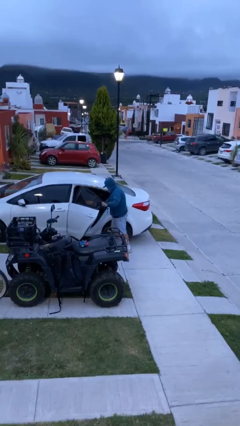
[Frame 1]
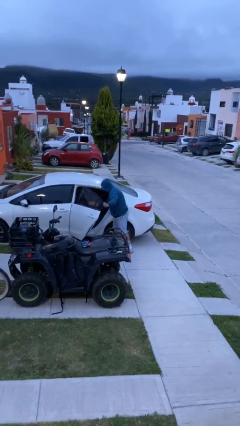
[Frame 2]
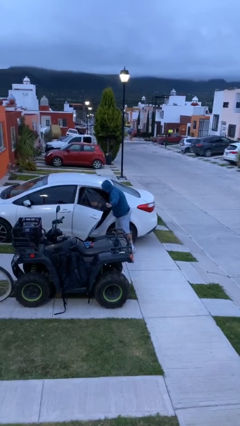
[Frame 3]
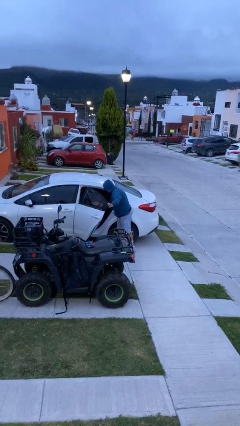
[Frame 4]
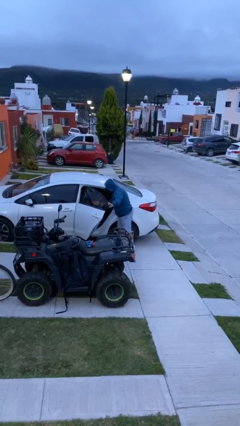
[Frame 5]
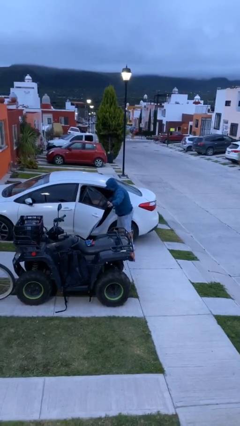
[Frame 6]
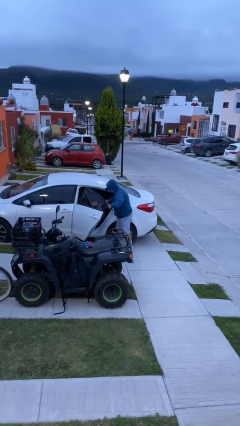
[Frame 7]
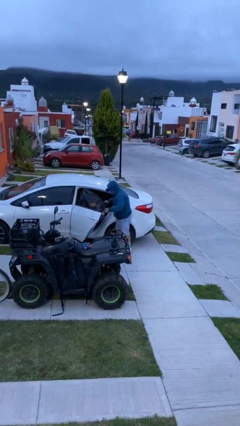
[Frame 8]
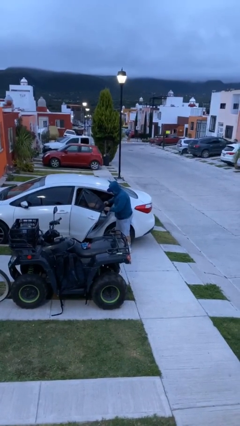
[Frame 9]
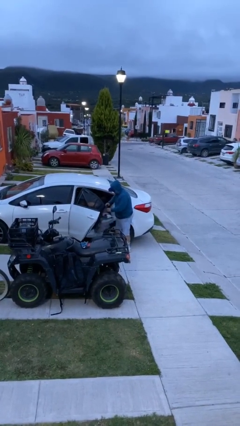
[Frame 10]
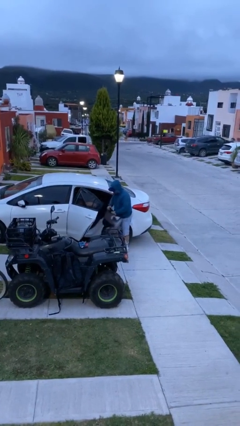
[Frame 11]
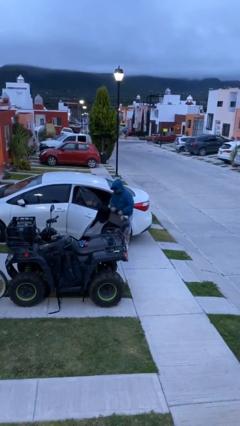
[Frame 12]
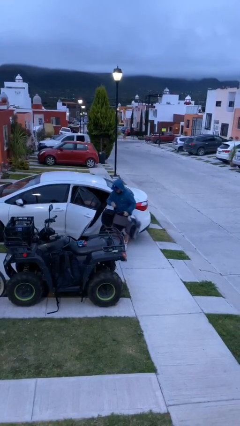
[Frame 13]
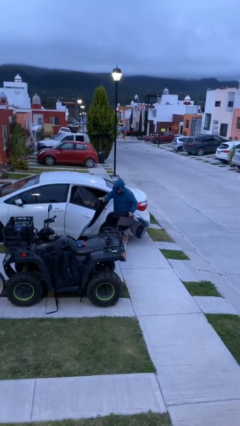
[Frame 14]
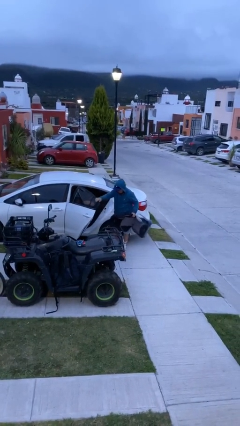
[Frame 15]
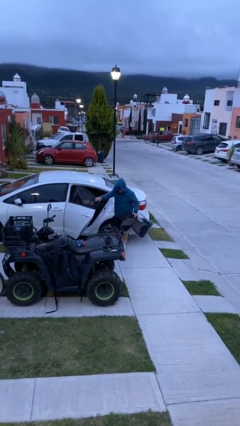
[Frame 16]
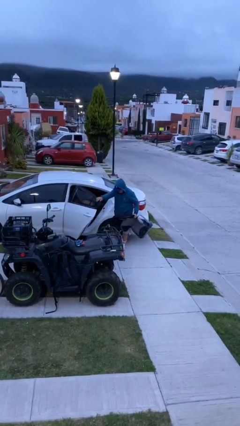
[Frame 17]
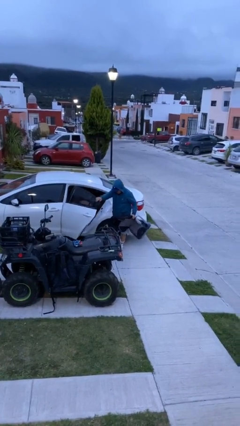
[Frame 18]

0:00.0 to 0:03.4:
person unloads car

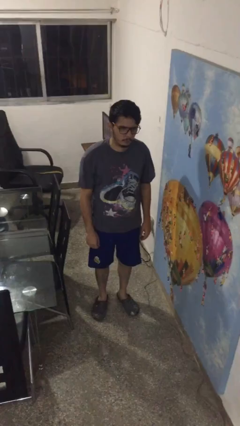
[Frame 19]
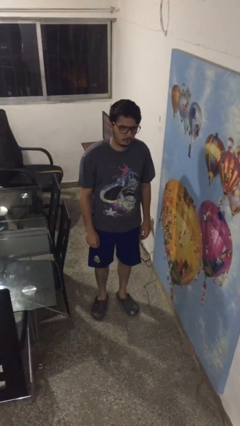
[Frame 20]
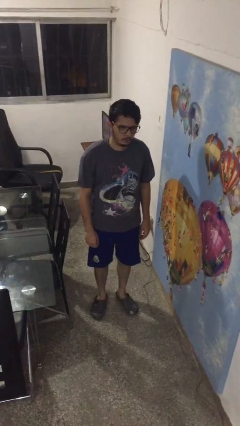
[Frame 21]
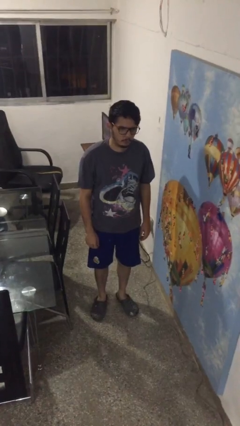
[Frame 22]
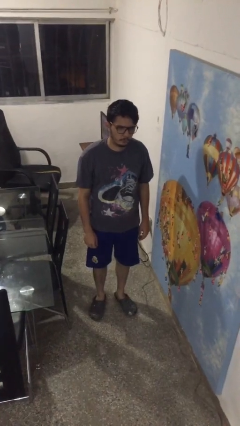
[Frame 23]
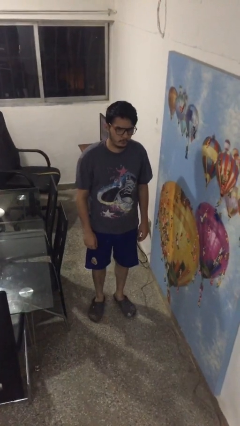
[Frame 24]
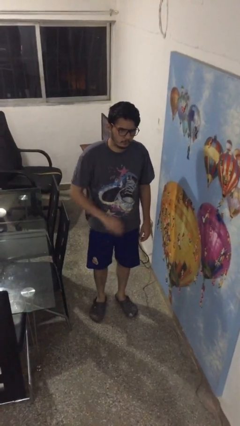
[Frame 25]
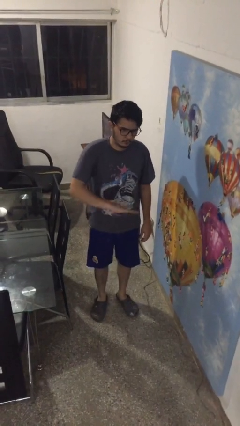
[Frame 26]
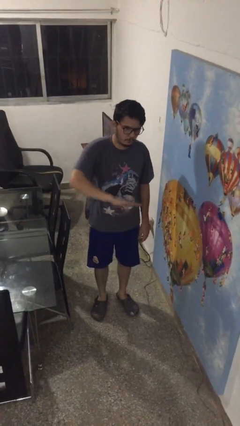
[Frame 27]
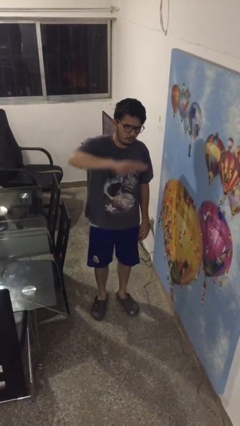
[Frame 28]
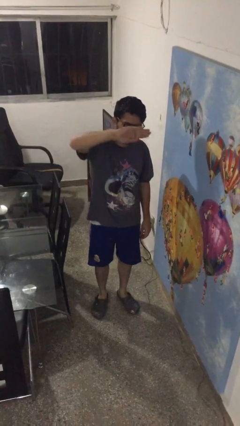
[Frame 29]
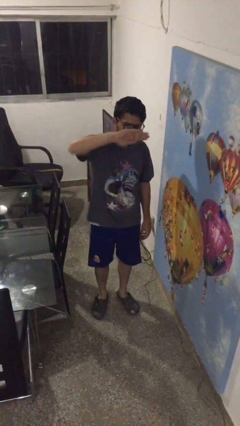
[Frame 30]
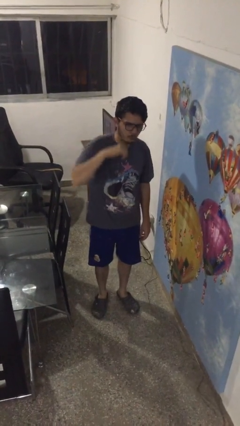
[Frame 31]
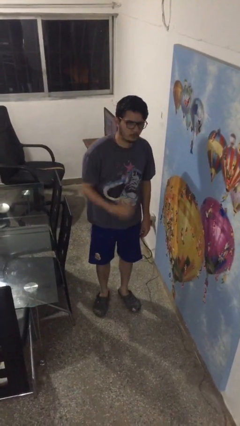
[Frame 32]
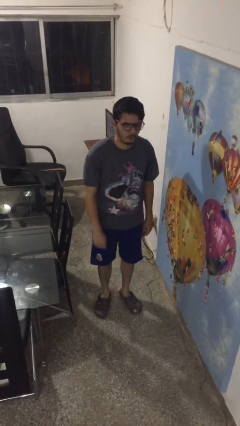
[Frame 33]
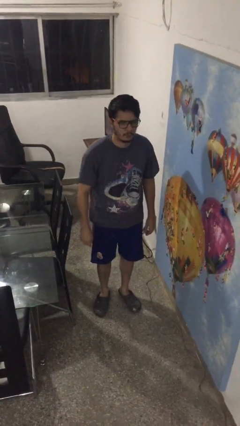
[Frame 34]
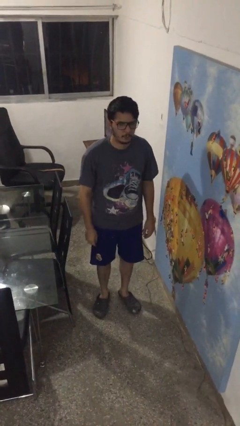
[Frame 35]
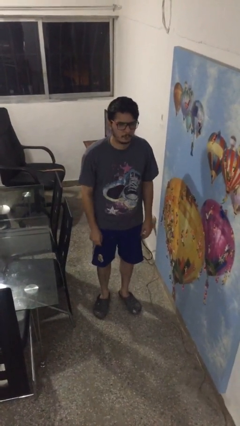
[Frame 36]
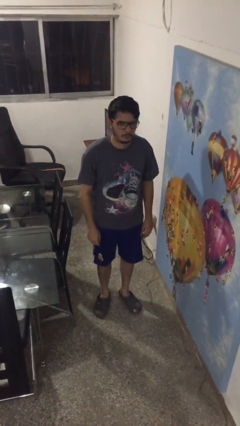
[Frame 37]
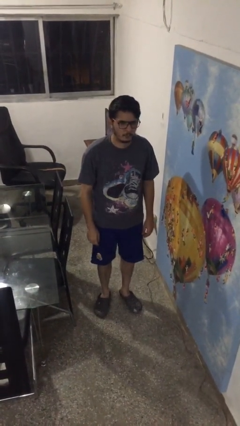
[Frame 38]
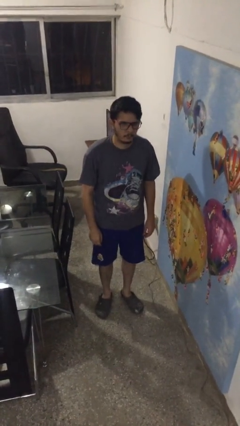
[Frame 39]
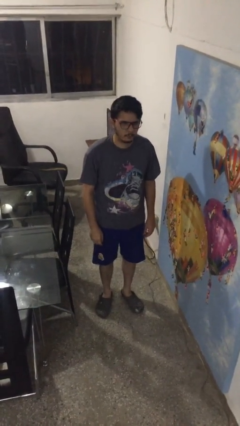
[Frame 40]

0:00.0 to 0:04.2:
person gestures swipe up

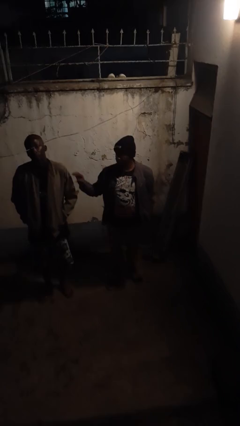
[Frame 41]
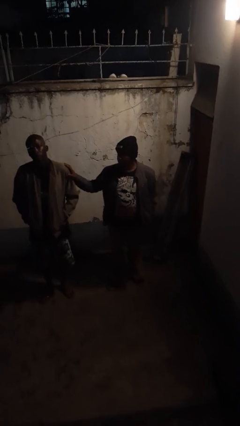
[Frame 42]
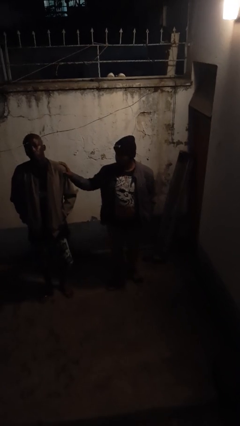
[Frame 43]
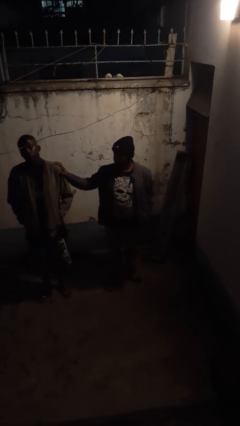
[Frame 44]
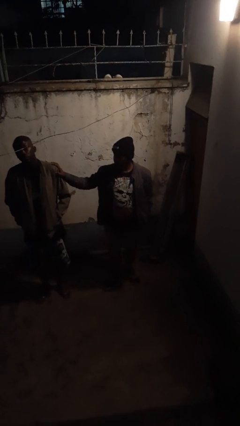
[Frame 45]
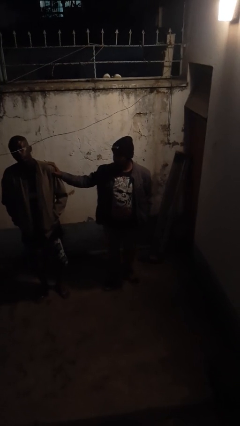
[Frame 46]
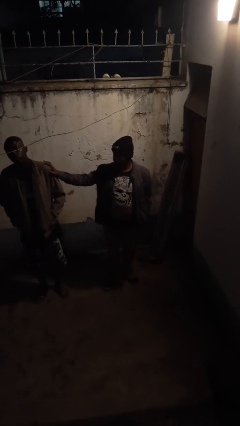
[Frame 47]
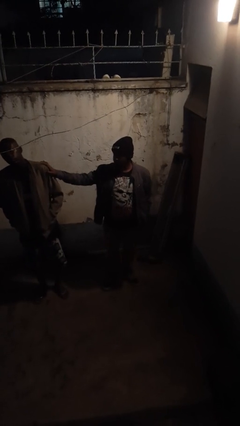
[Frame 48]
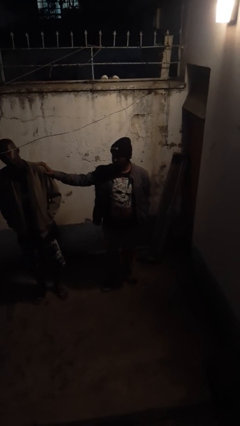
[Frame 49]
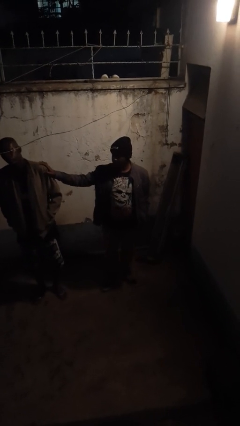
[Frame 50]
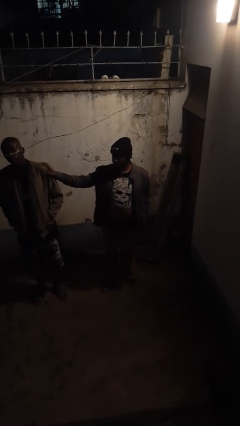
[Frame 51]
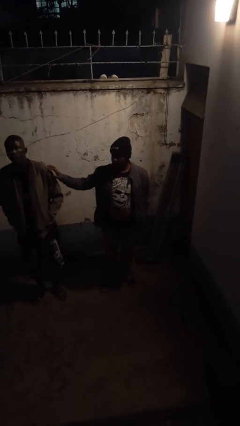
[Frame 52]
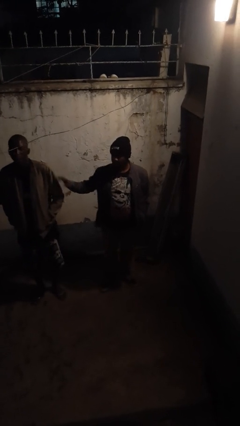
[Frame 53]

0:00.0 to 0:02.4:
person shoves person

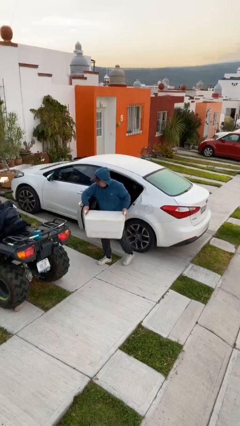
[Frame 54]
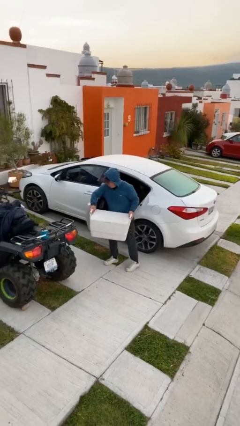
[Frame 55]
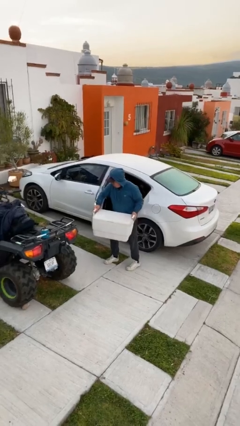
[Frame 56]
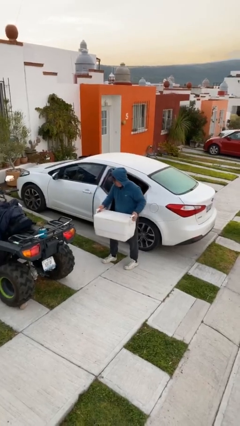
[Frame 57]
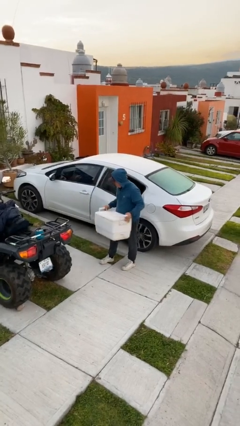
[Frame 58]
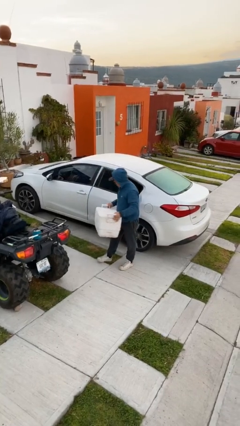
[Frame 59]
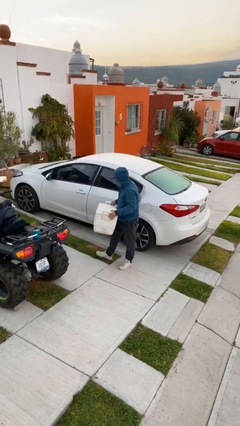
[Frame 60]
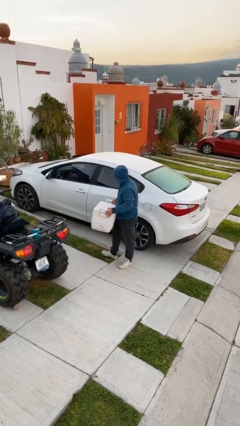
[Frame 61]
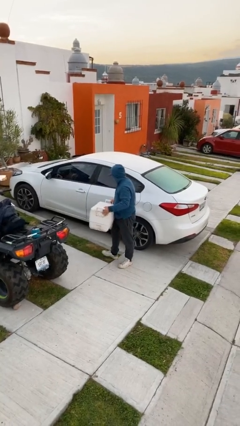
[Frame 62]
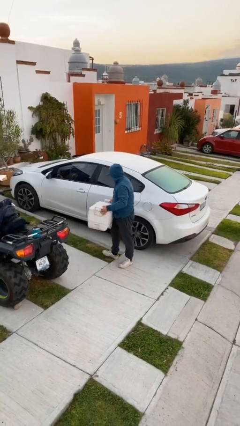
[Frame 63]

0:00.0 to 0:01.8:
person closes car door

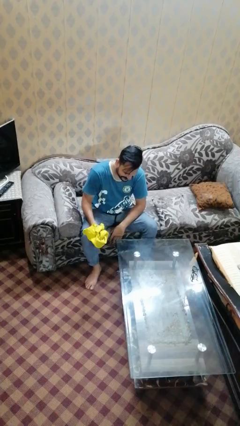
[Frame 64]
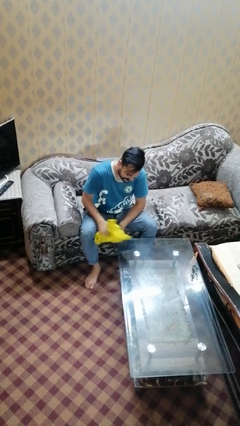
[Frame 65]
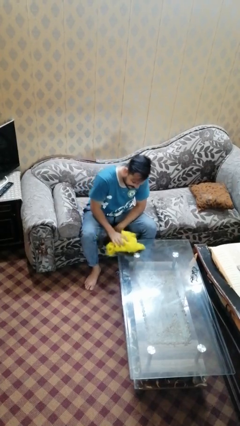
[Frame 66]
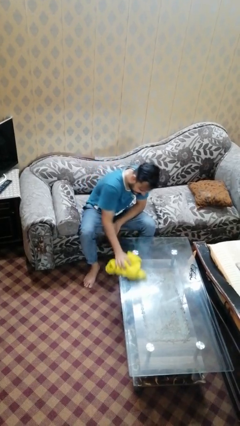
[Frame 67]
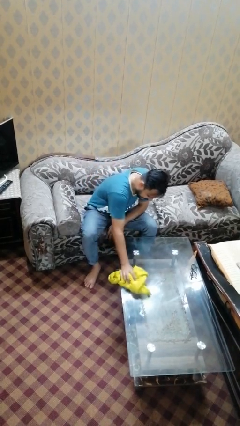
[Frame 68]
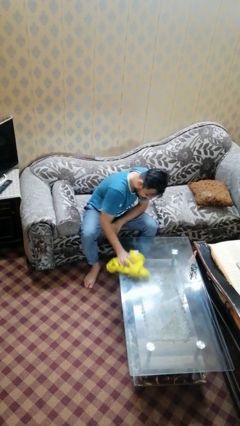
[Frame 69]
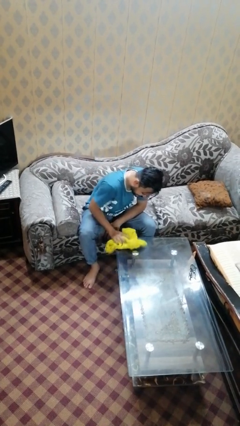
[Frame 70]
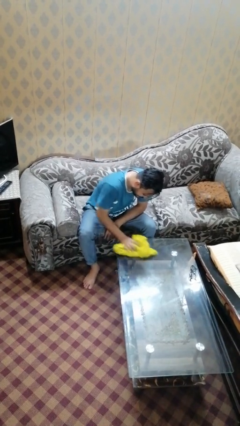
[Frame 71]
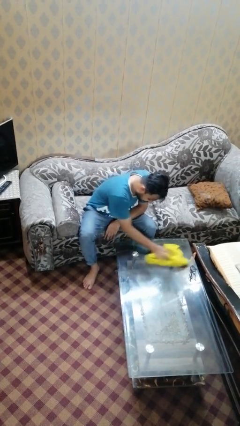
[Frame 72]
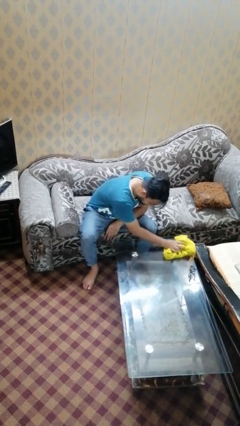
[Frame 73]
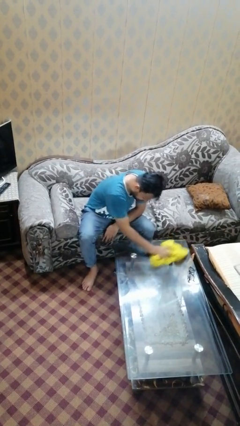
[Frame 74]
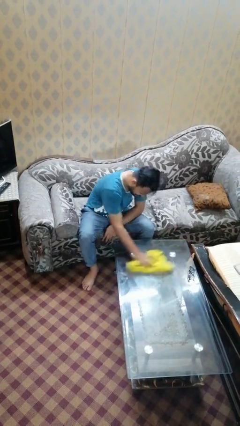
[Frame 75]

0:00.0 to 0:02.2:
person cleans table with rag

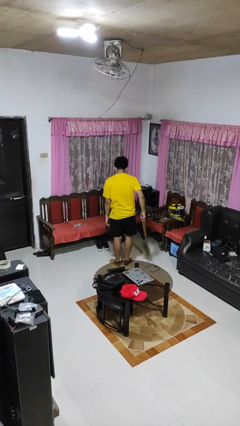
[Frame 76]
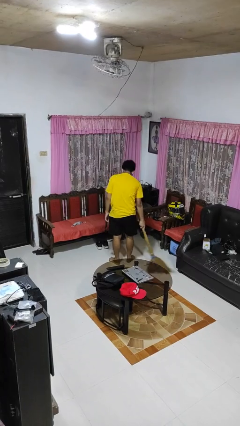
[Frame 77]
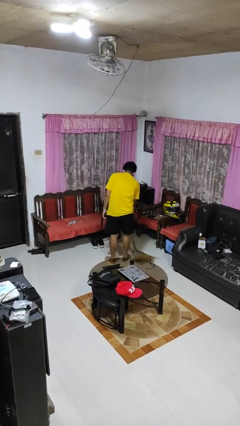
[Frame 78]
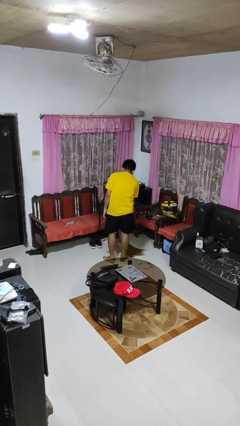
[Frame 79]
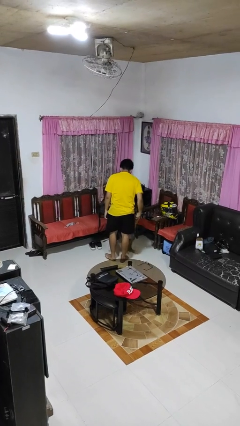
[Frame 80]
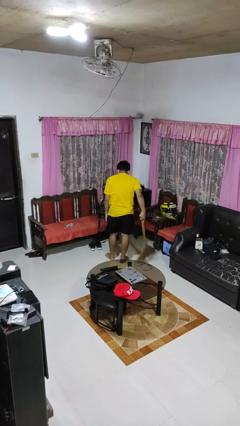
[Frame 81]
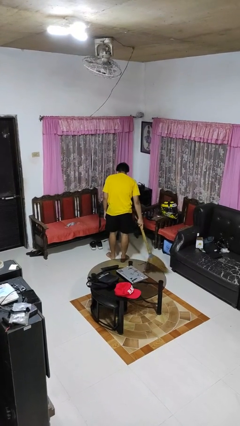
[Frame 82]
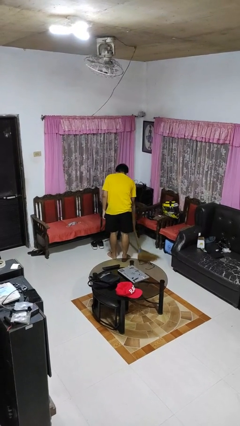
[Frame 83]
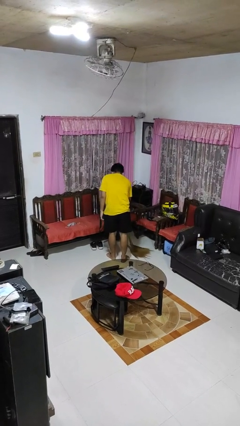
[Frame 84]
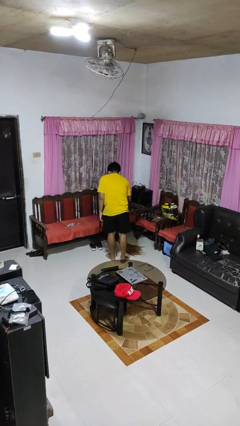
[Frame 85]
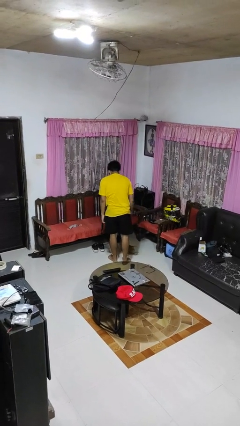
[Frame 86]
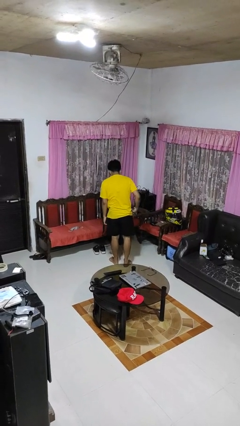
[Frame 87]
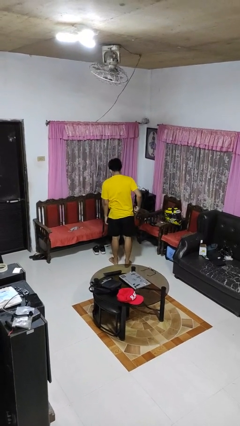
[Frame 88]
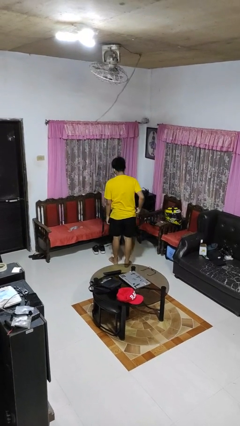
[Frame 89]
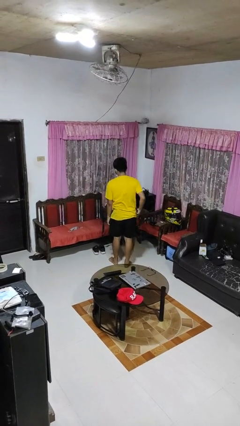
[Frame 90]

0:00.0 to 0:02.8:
person sweeps floor

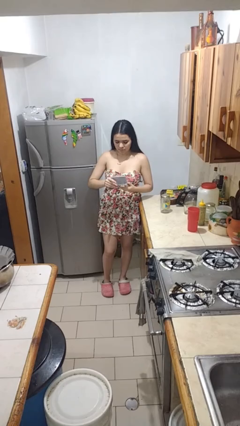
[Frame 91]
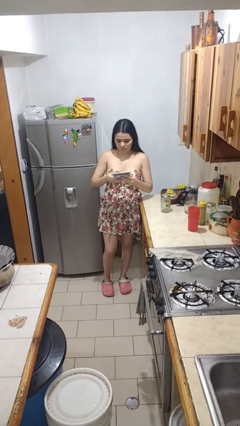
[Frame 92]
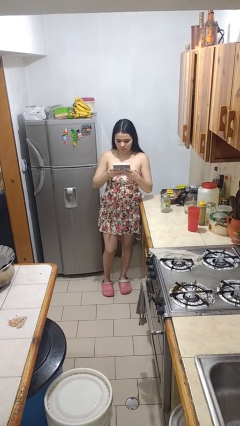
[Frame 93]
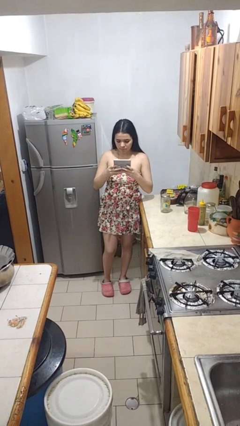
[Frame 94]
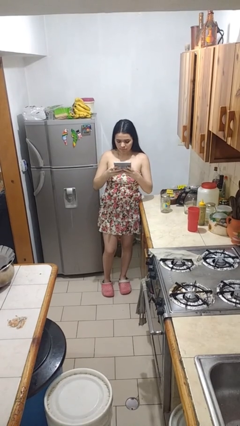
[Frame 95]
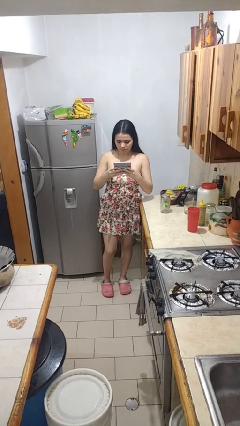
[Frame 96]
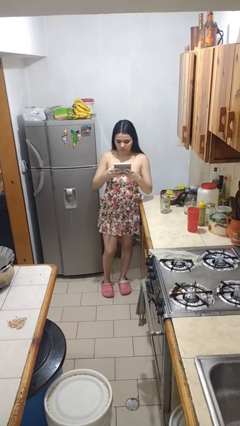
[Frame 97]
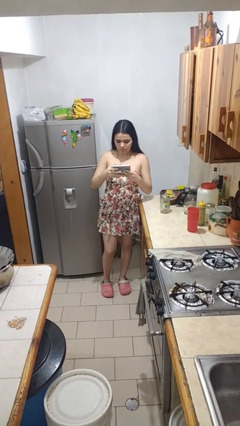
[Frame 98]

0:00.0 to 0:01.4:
person interacts with handheld game
